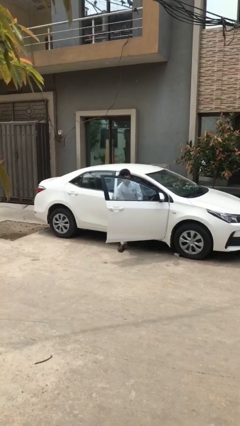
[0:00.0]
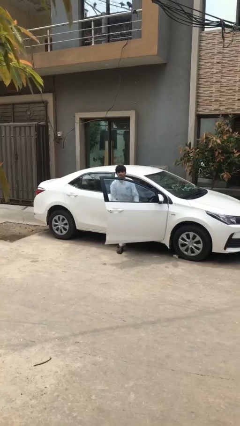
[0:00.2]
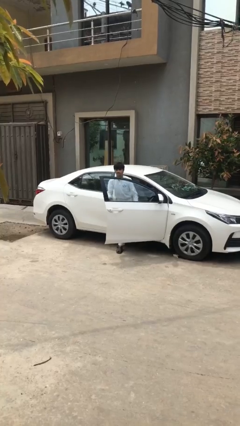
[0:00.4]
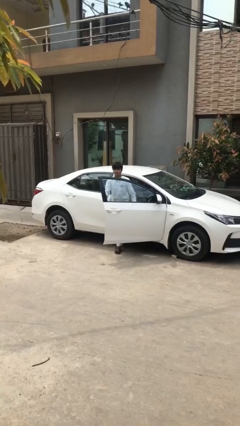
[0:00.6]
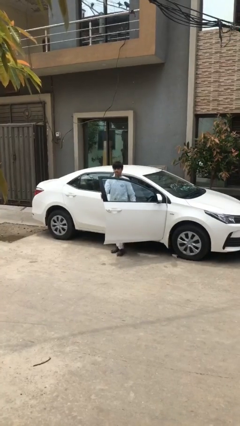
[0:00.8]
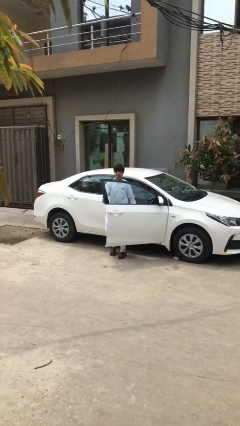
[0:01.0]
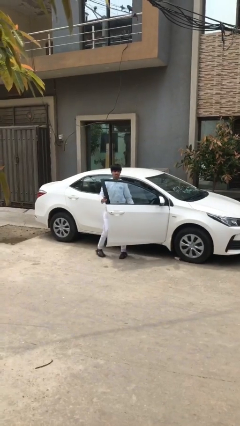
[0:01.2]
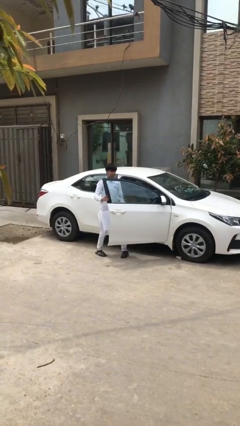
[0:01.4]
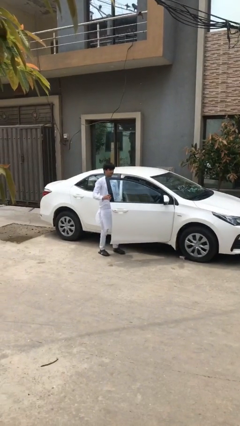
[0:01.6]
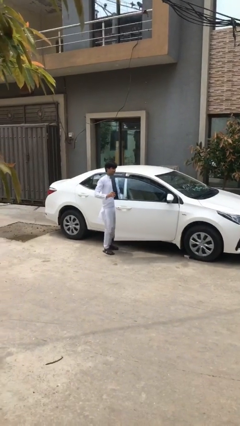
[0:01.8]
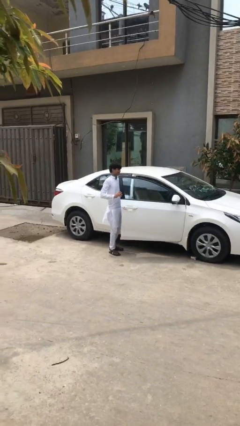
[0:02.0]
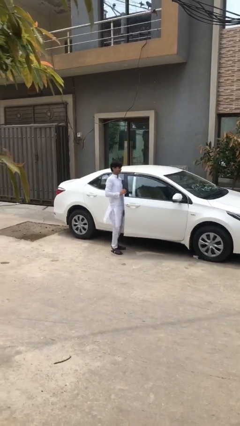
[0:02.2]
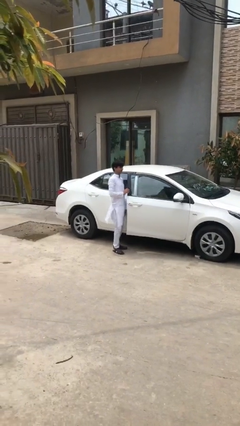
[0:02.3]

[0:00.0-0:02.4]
person exits car

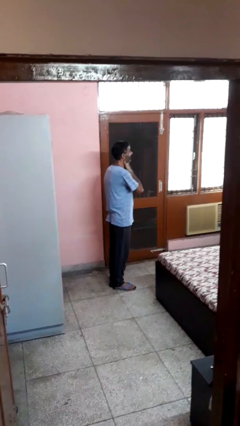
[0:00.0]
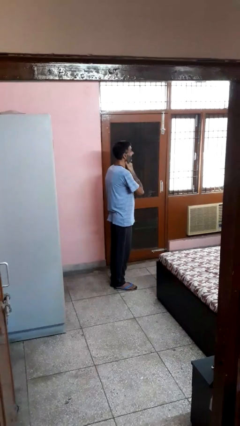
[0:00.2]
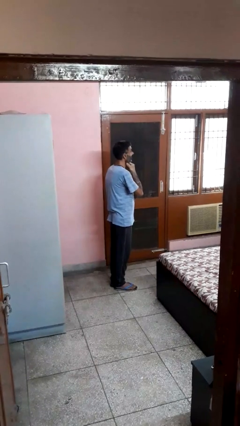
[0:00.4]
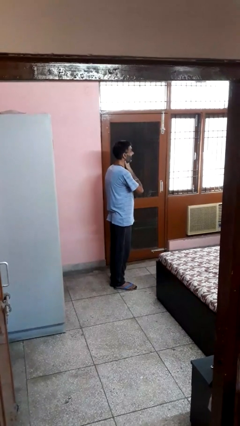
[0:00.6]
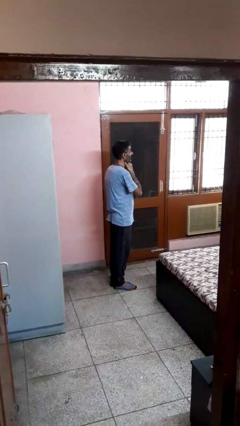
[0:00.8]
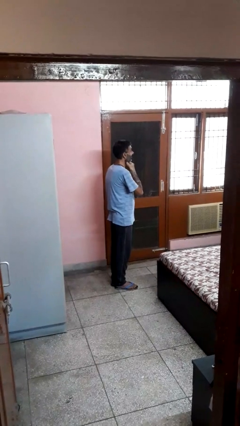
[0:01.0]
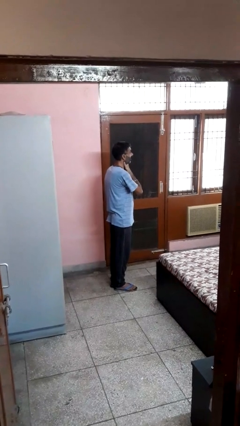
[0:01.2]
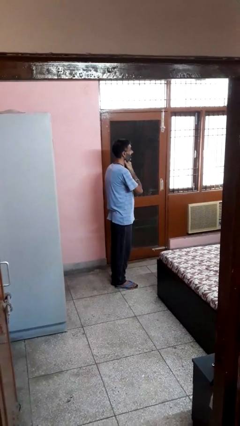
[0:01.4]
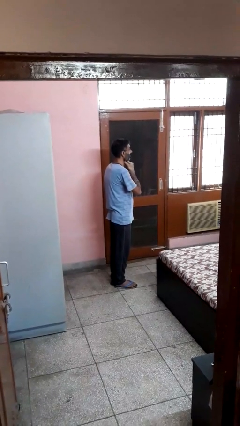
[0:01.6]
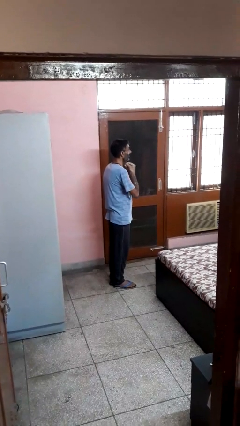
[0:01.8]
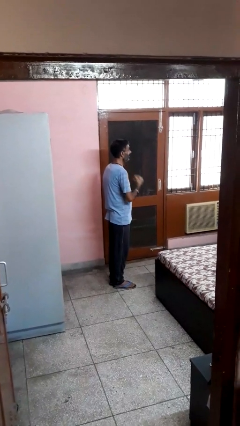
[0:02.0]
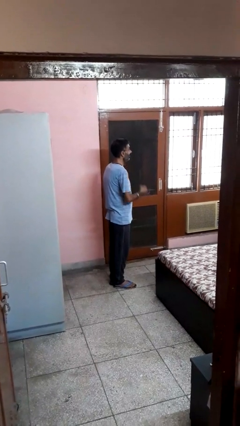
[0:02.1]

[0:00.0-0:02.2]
person rubs neck

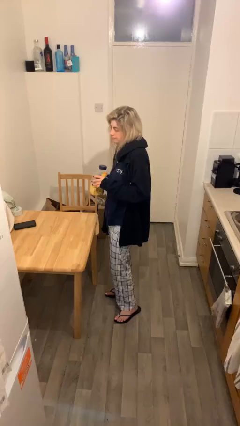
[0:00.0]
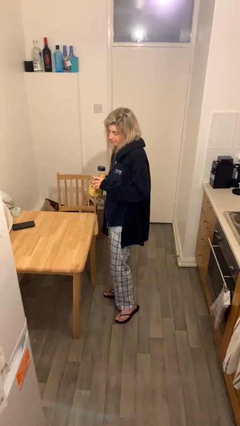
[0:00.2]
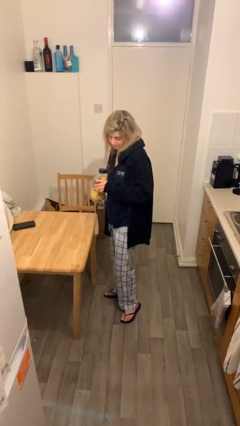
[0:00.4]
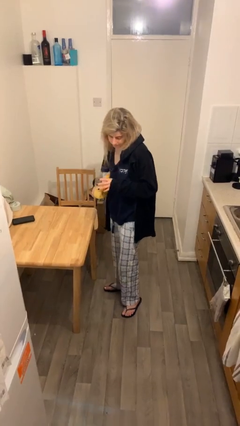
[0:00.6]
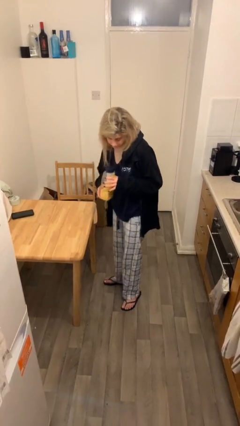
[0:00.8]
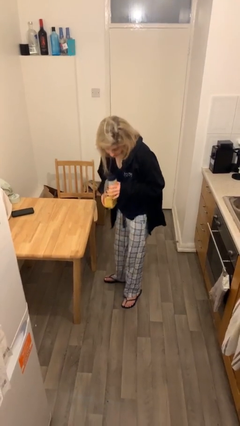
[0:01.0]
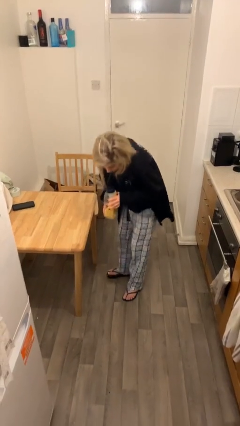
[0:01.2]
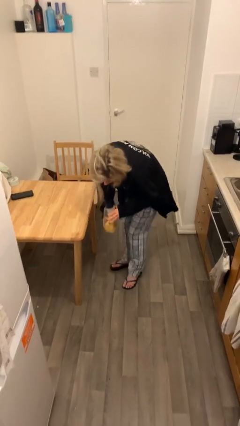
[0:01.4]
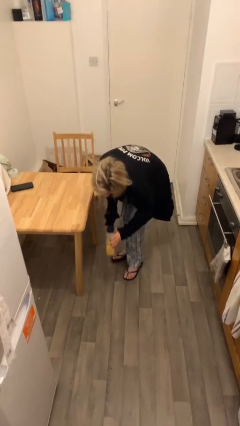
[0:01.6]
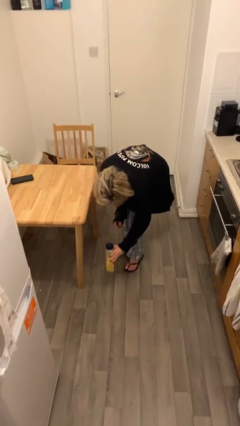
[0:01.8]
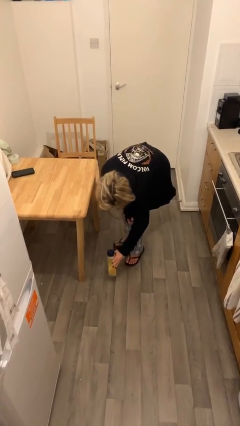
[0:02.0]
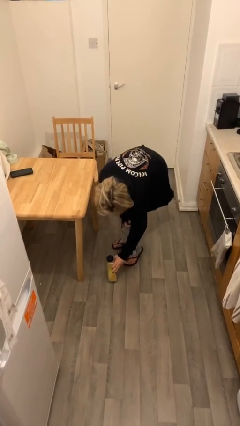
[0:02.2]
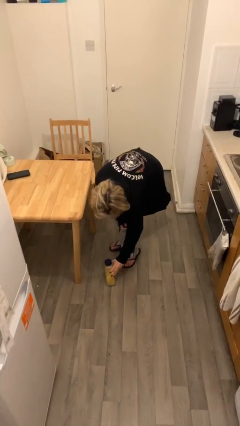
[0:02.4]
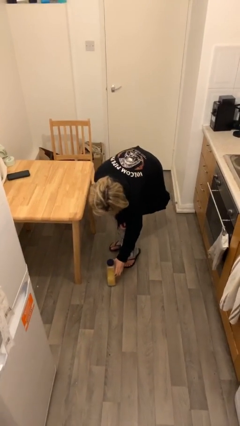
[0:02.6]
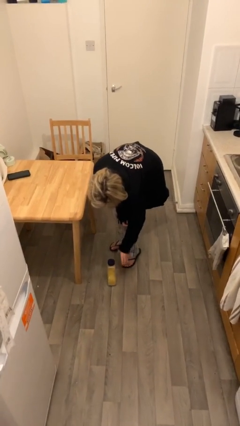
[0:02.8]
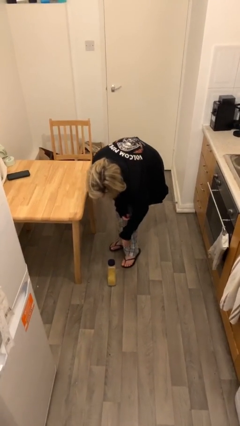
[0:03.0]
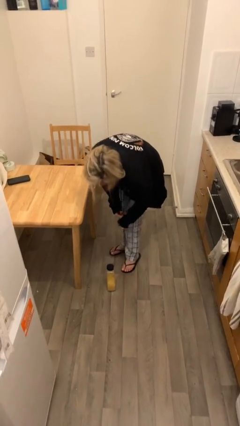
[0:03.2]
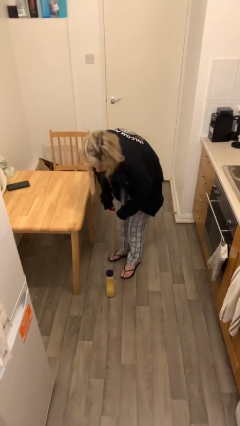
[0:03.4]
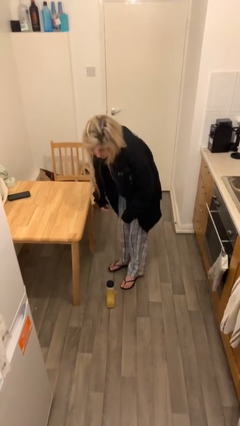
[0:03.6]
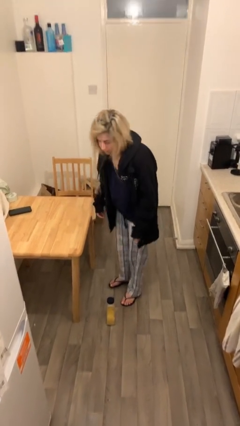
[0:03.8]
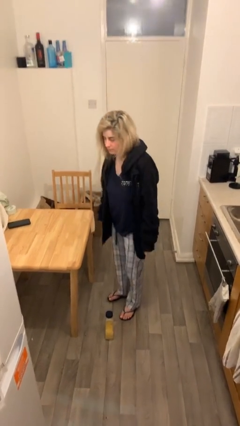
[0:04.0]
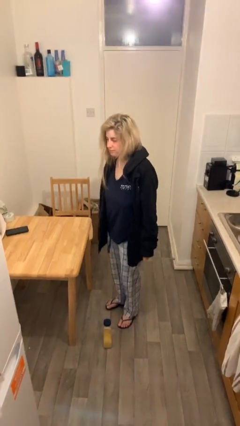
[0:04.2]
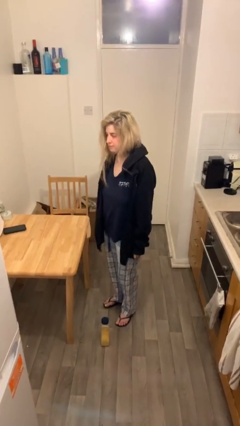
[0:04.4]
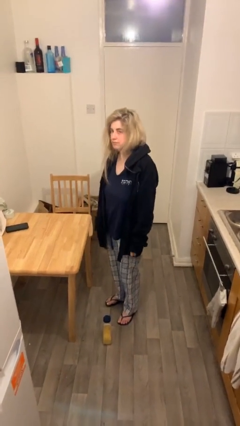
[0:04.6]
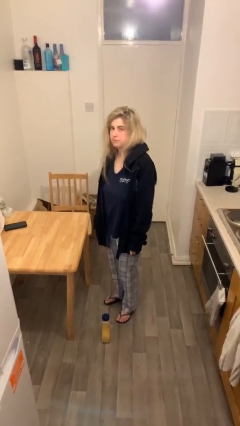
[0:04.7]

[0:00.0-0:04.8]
person puts down object on floor

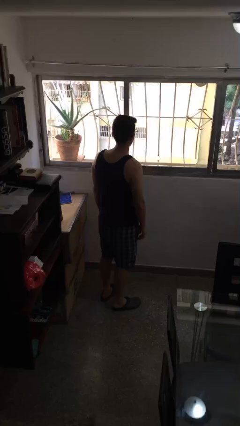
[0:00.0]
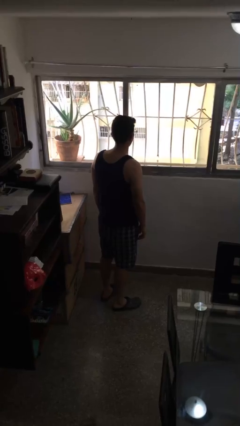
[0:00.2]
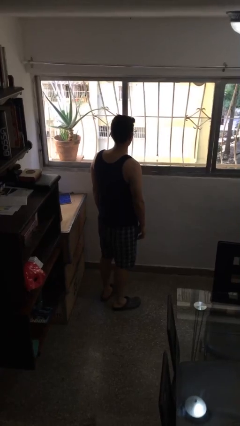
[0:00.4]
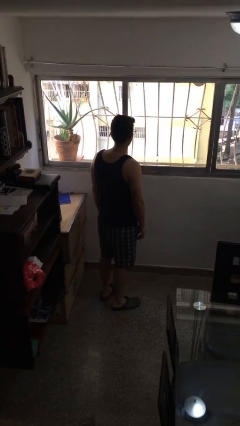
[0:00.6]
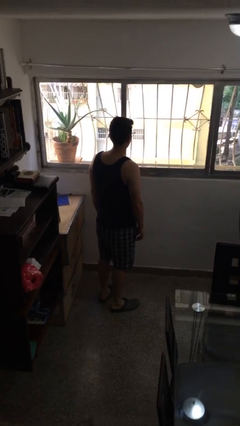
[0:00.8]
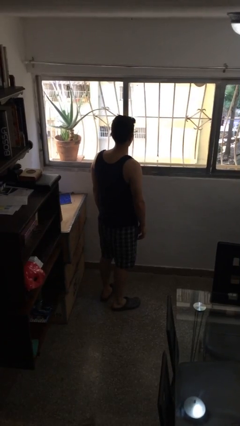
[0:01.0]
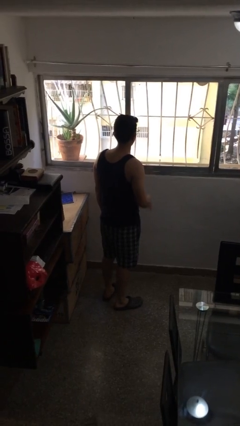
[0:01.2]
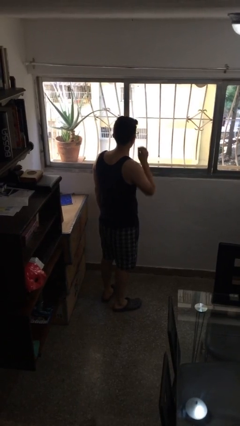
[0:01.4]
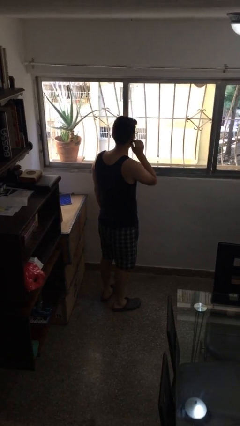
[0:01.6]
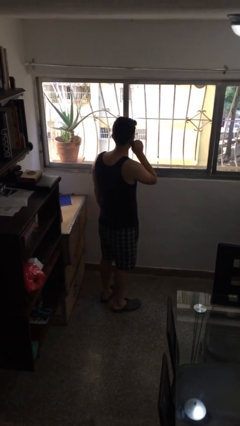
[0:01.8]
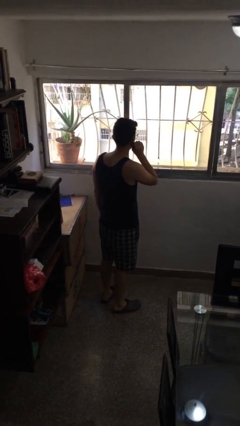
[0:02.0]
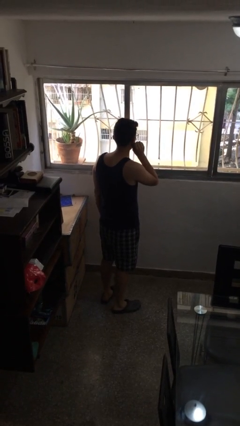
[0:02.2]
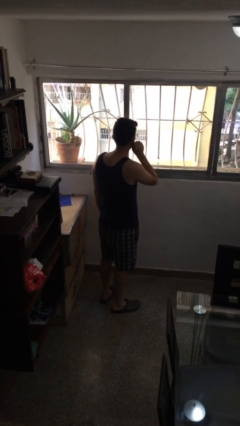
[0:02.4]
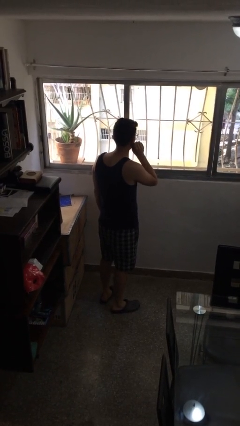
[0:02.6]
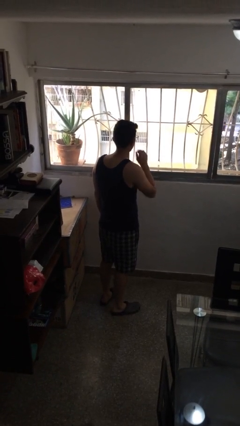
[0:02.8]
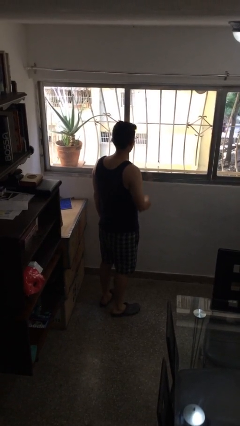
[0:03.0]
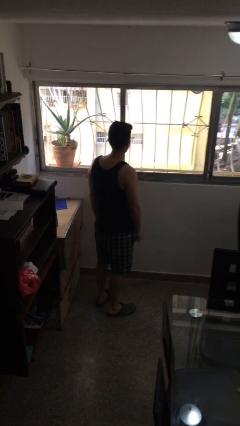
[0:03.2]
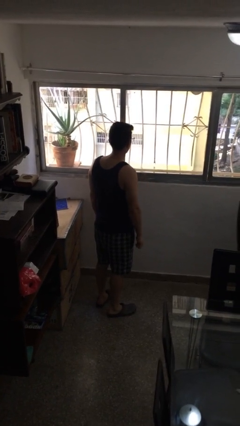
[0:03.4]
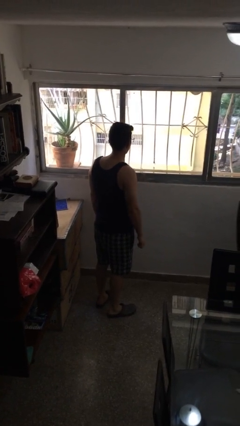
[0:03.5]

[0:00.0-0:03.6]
person touches earlobe

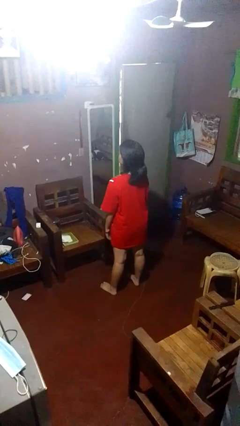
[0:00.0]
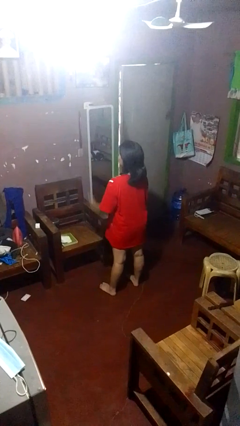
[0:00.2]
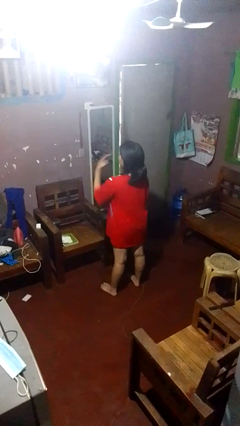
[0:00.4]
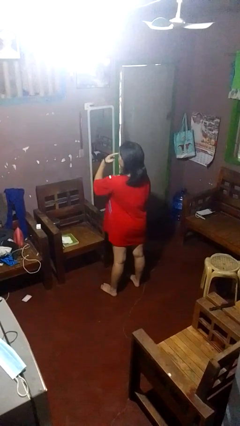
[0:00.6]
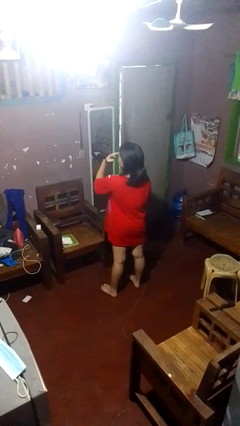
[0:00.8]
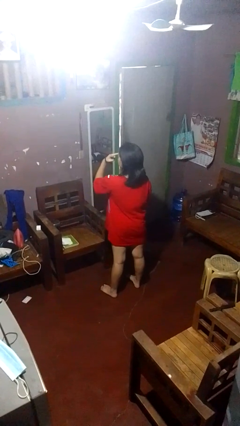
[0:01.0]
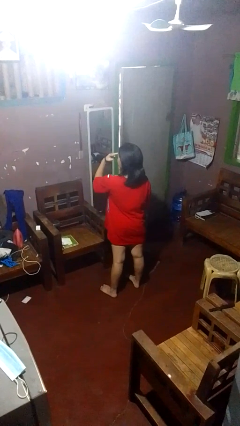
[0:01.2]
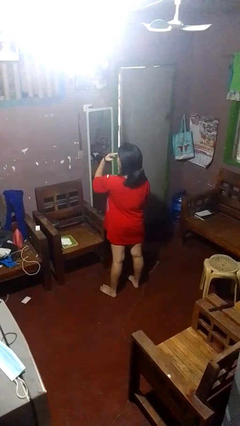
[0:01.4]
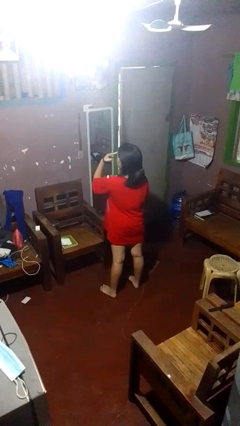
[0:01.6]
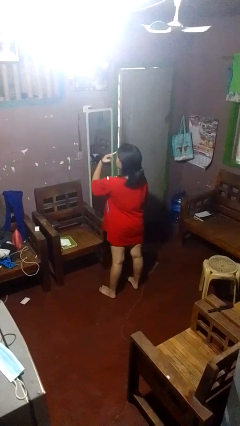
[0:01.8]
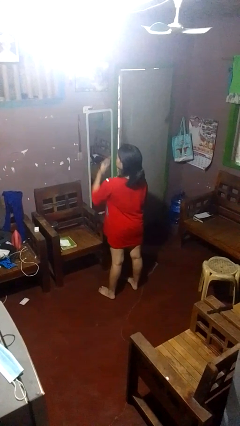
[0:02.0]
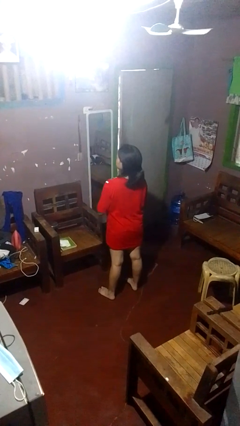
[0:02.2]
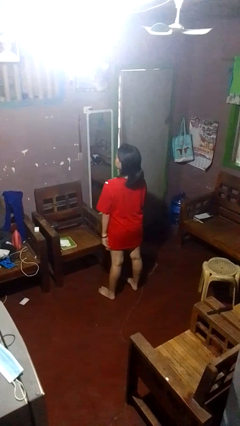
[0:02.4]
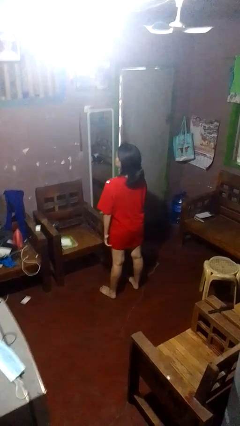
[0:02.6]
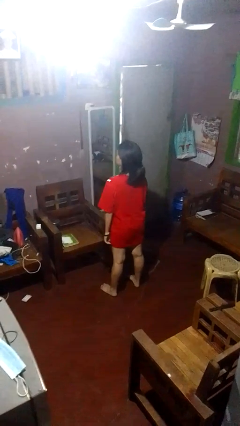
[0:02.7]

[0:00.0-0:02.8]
person gestures watch closely

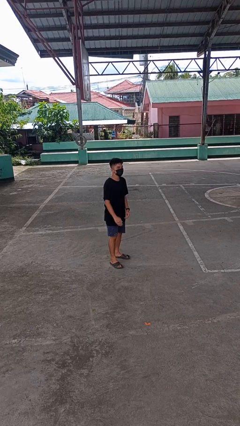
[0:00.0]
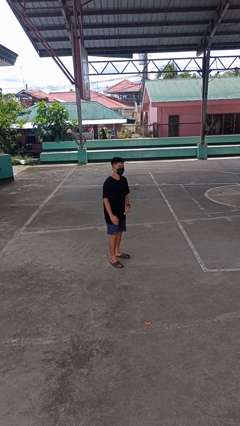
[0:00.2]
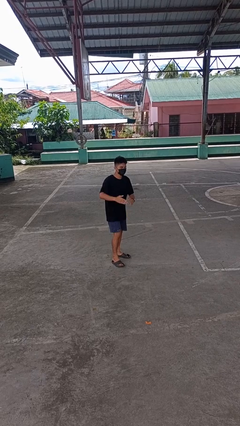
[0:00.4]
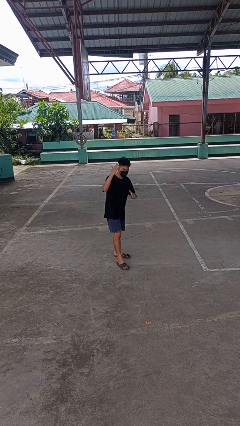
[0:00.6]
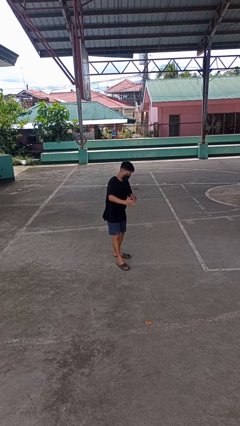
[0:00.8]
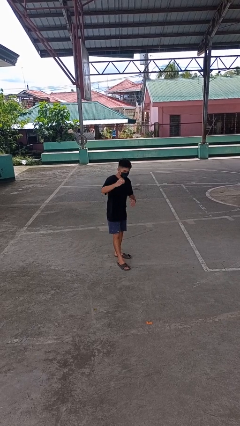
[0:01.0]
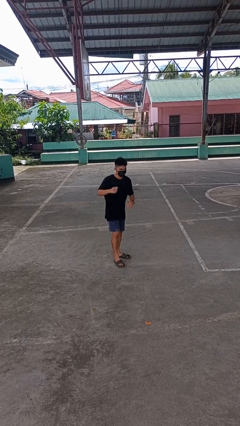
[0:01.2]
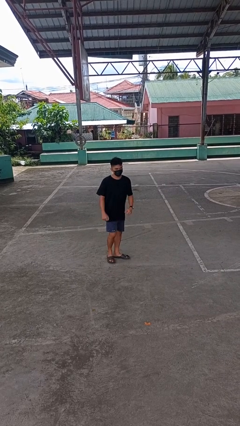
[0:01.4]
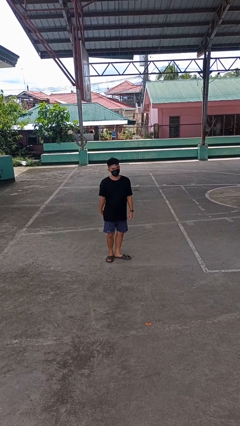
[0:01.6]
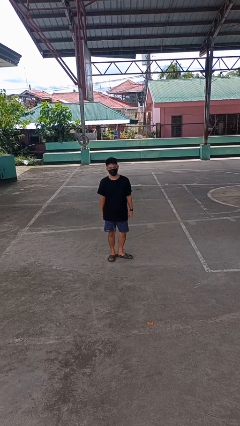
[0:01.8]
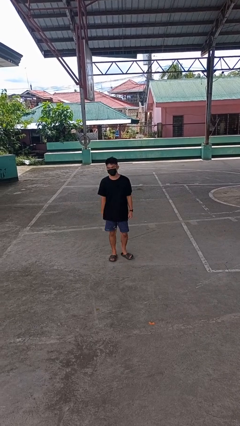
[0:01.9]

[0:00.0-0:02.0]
person karate chop
